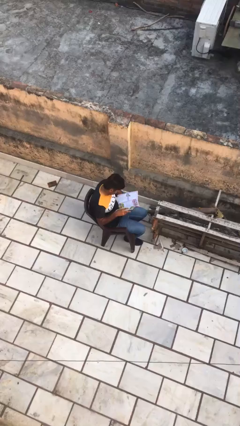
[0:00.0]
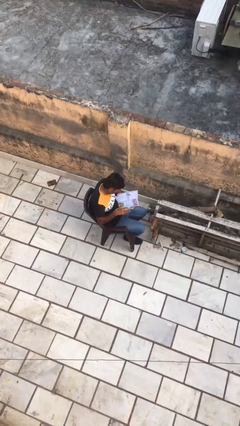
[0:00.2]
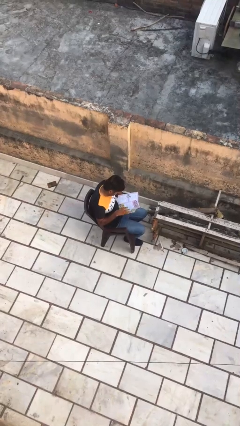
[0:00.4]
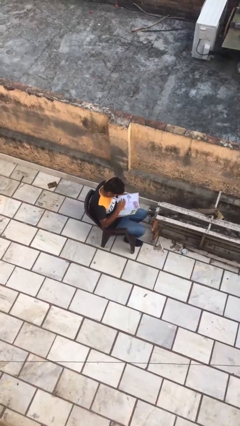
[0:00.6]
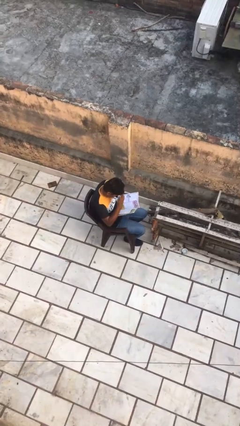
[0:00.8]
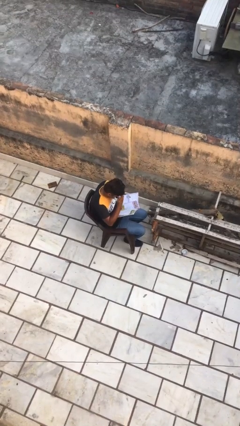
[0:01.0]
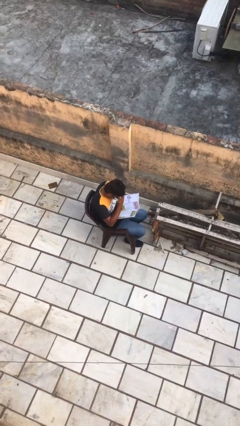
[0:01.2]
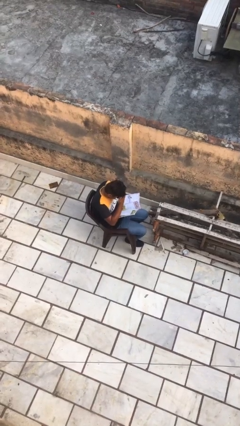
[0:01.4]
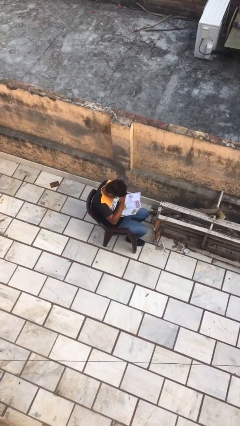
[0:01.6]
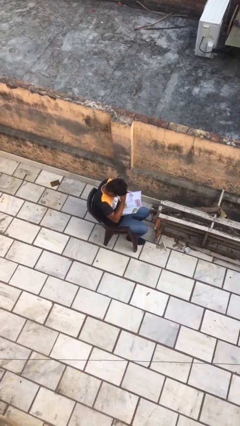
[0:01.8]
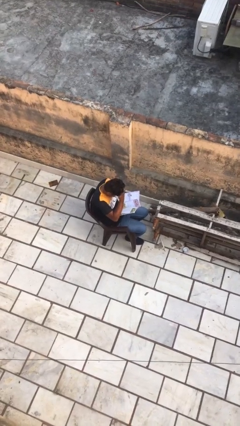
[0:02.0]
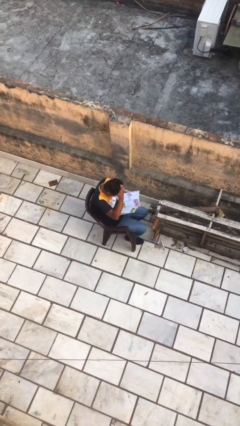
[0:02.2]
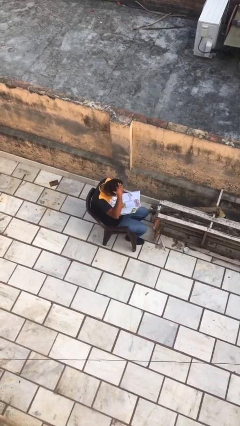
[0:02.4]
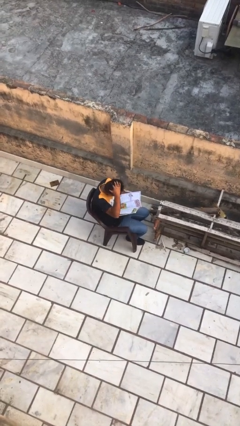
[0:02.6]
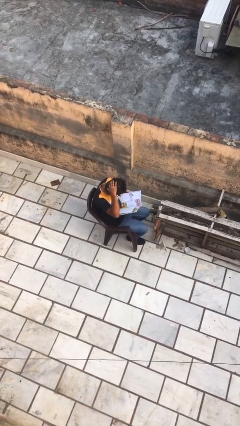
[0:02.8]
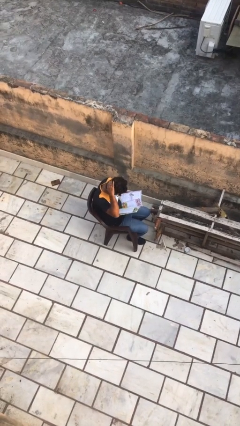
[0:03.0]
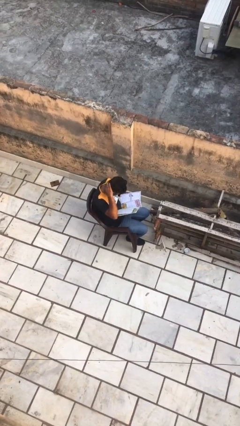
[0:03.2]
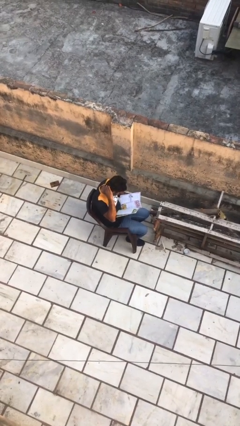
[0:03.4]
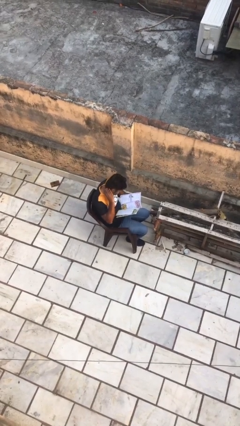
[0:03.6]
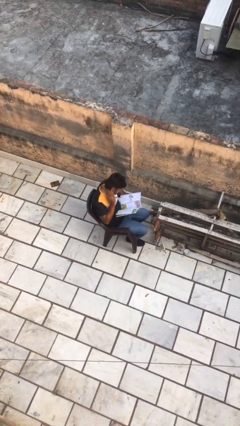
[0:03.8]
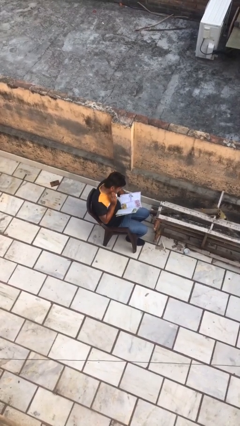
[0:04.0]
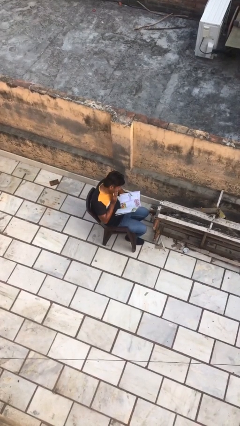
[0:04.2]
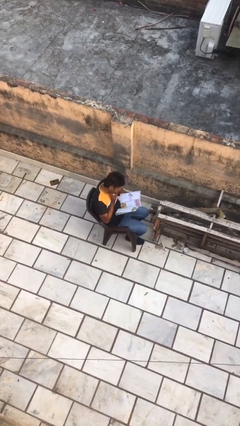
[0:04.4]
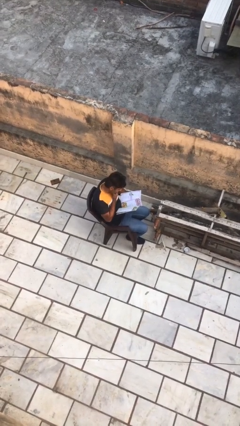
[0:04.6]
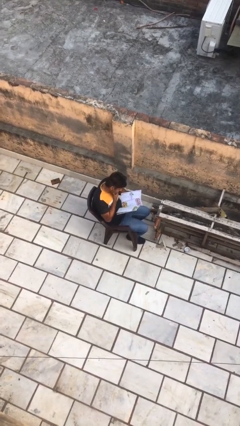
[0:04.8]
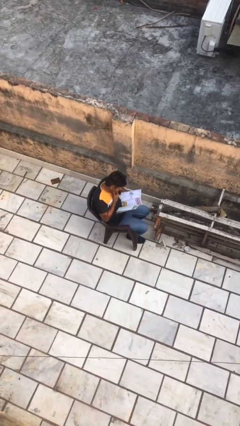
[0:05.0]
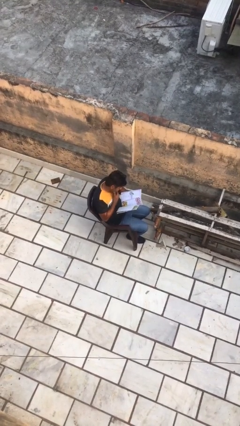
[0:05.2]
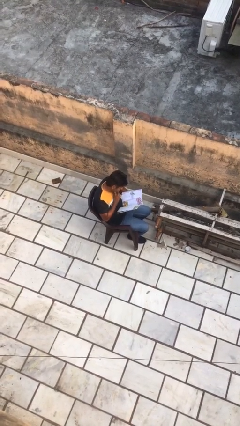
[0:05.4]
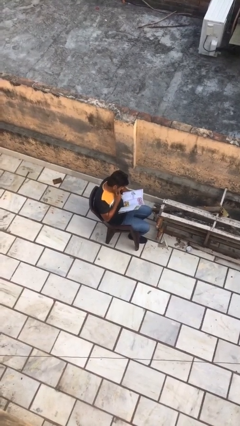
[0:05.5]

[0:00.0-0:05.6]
person reads document

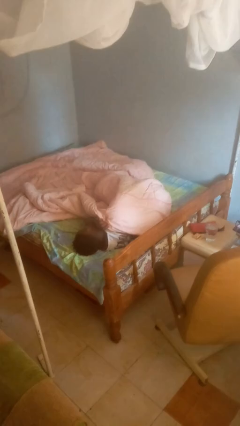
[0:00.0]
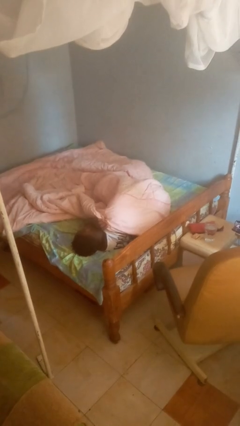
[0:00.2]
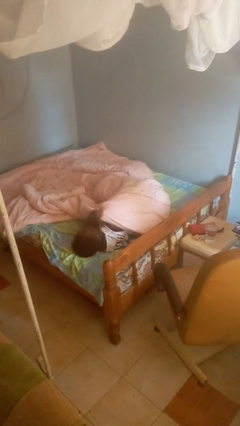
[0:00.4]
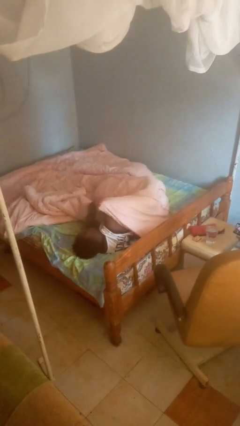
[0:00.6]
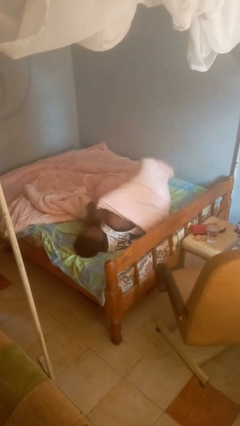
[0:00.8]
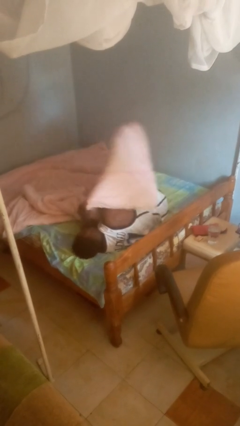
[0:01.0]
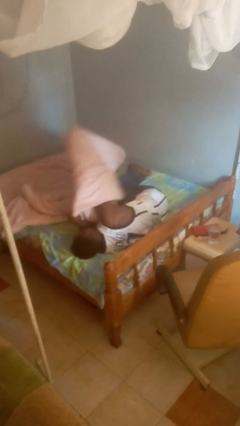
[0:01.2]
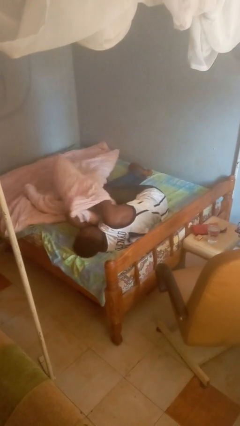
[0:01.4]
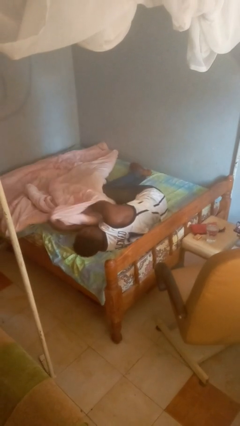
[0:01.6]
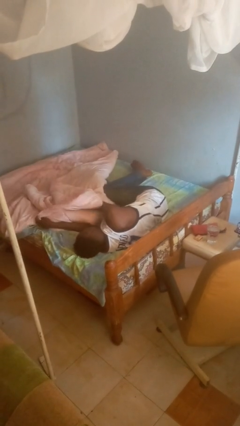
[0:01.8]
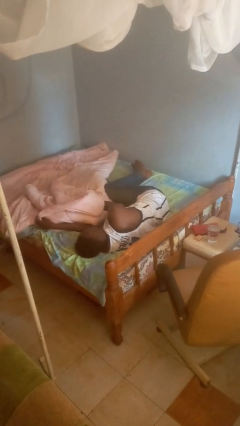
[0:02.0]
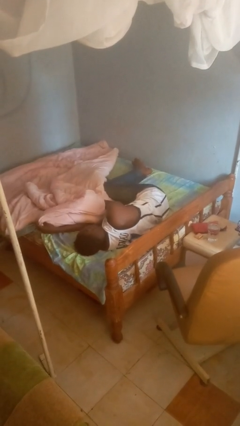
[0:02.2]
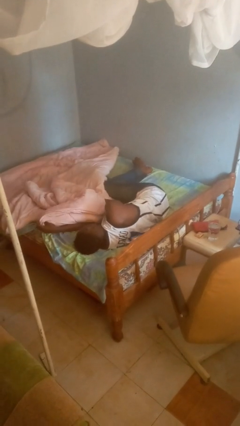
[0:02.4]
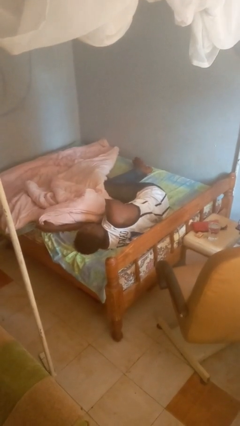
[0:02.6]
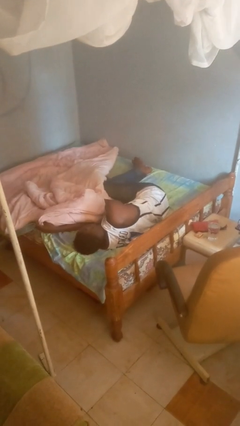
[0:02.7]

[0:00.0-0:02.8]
person uncovers with blanket

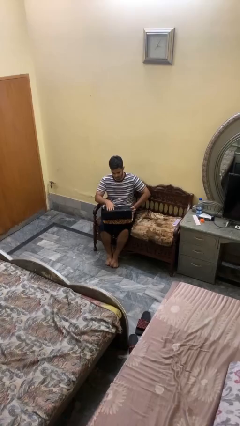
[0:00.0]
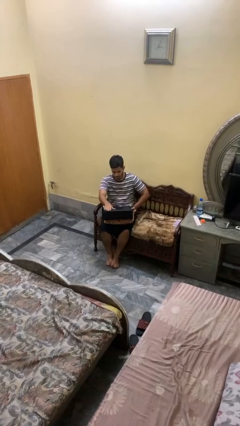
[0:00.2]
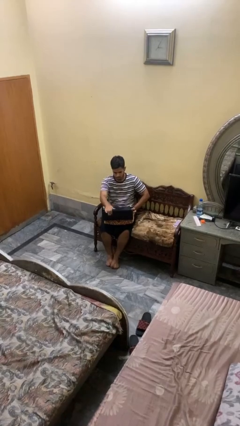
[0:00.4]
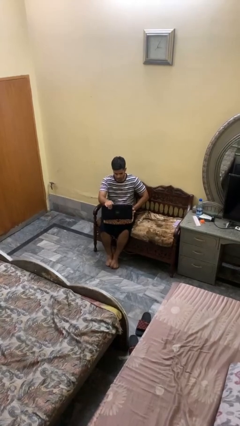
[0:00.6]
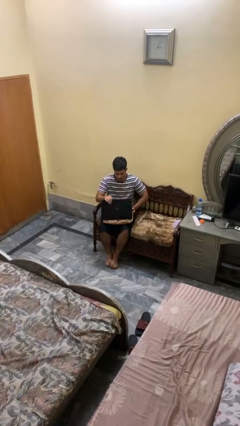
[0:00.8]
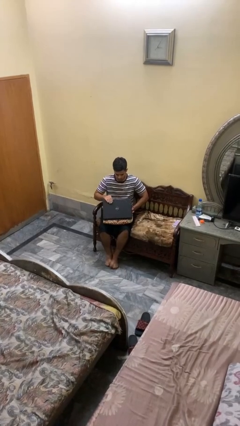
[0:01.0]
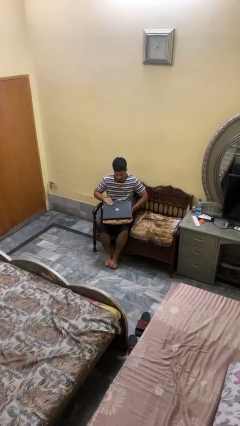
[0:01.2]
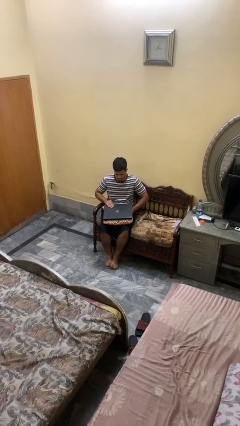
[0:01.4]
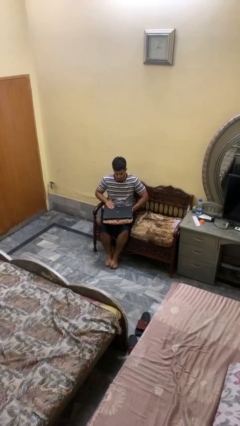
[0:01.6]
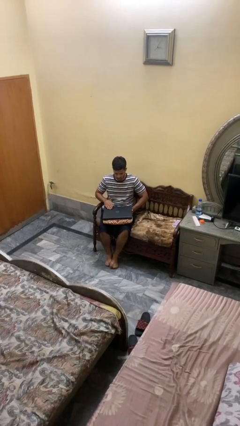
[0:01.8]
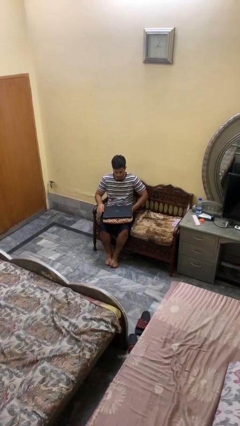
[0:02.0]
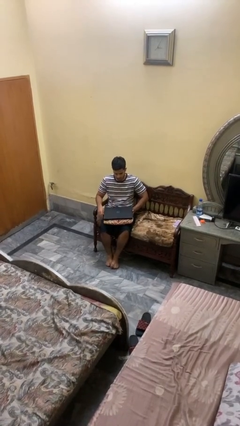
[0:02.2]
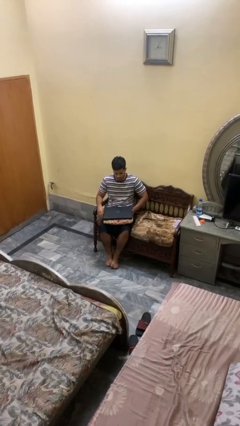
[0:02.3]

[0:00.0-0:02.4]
person closes laptop

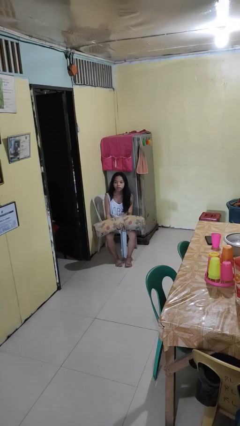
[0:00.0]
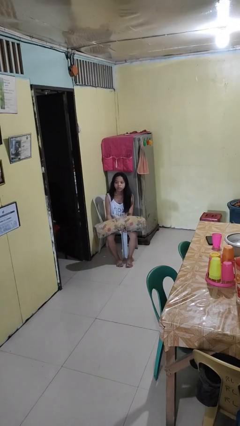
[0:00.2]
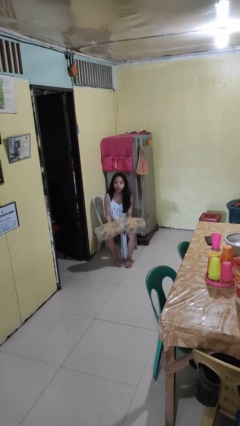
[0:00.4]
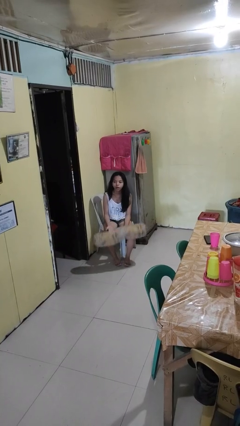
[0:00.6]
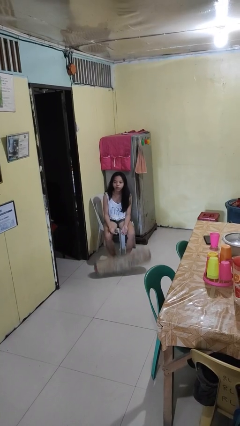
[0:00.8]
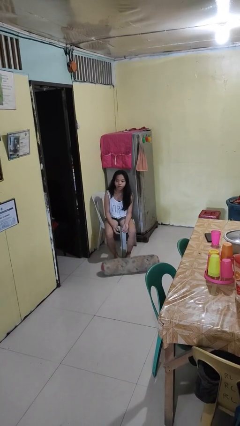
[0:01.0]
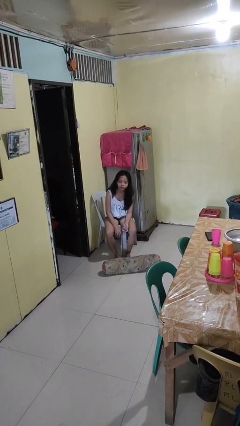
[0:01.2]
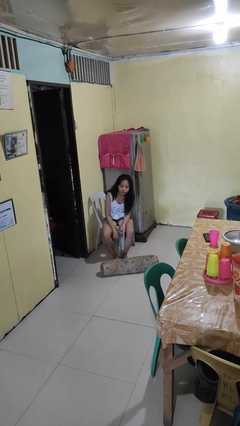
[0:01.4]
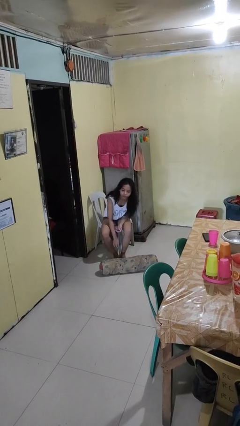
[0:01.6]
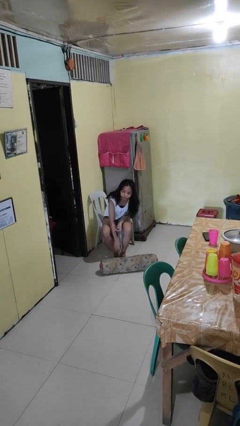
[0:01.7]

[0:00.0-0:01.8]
person drops object

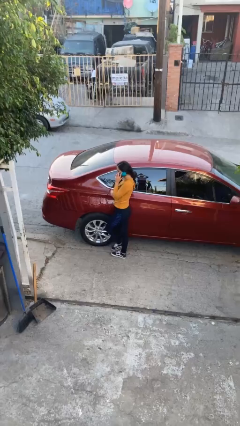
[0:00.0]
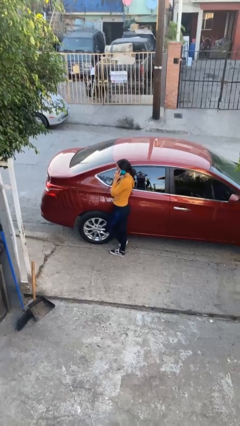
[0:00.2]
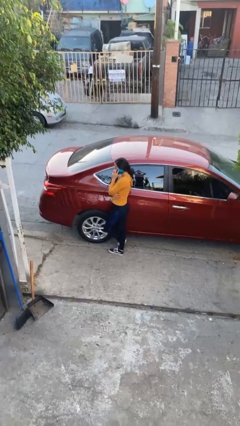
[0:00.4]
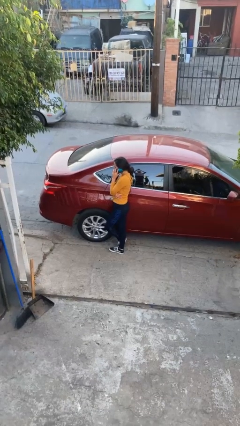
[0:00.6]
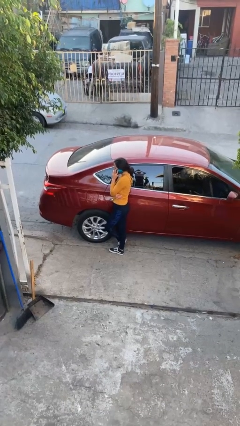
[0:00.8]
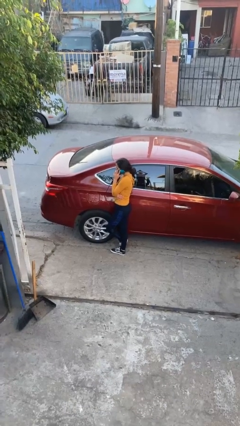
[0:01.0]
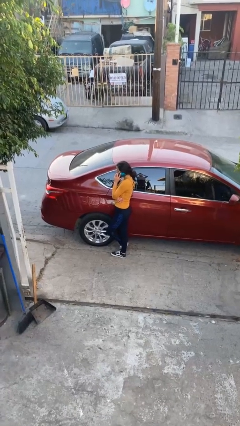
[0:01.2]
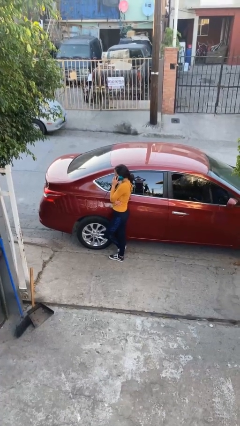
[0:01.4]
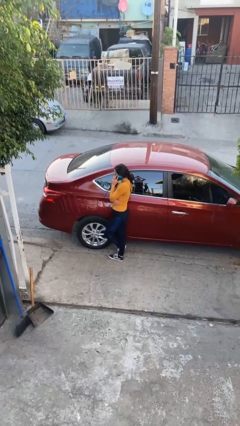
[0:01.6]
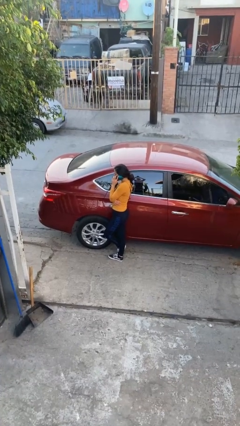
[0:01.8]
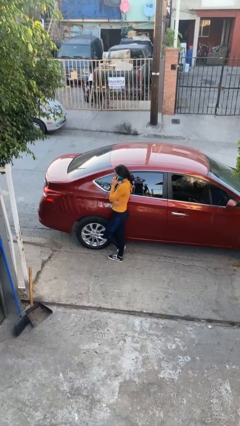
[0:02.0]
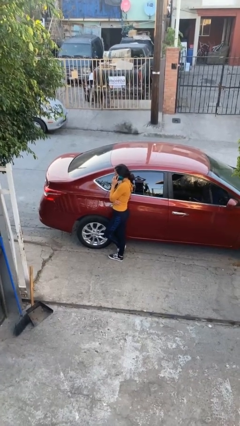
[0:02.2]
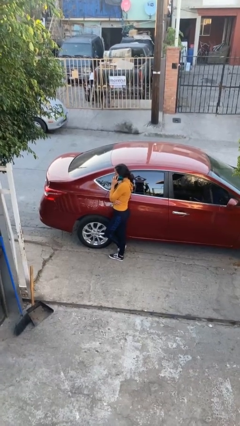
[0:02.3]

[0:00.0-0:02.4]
person leans against car

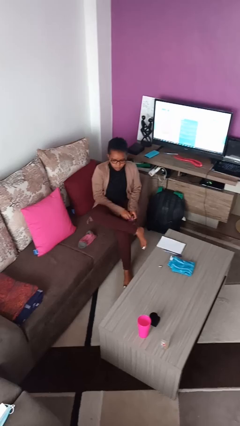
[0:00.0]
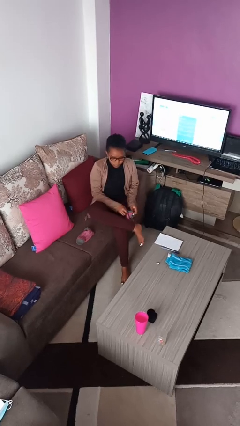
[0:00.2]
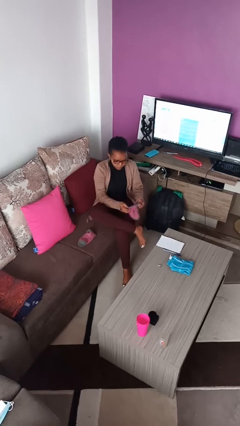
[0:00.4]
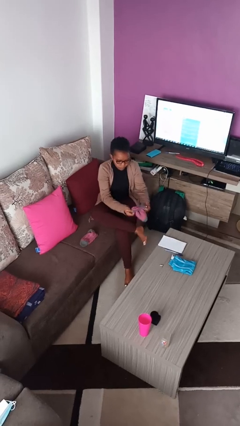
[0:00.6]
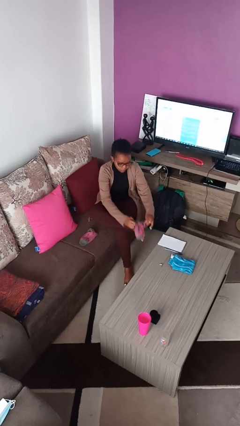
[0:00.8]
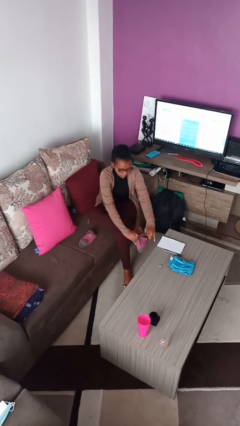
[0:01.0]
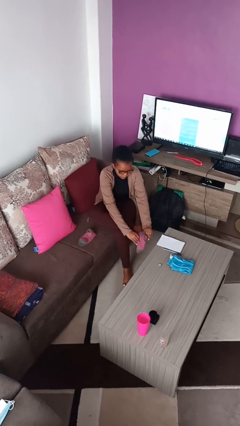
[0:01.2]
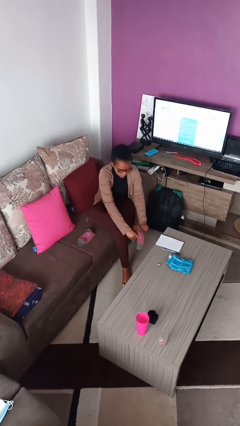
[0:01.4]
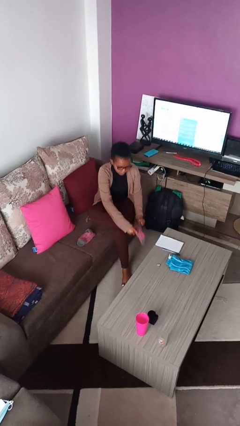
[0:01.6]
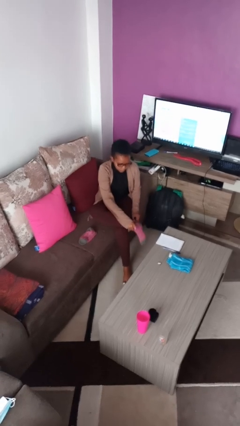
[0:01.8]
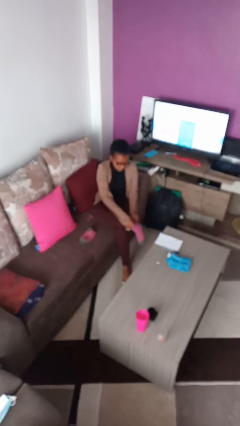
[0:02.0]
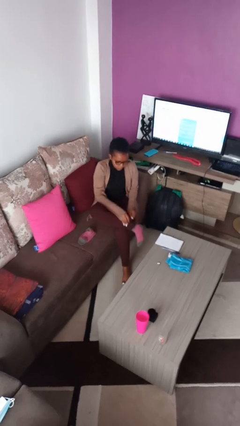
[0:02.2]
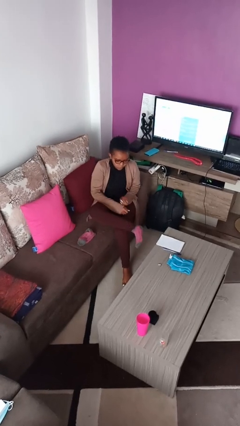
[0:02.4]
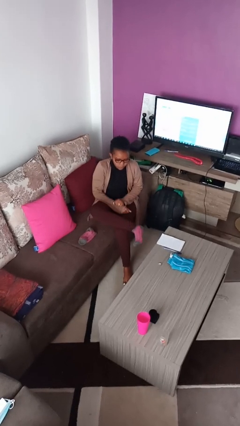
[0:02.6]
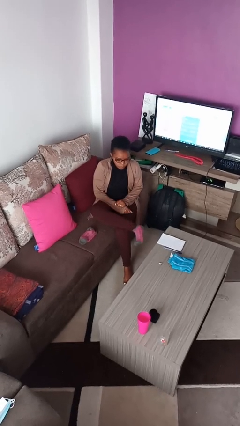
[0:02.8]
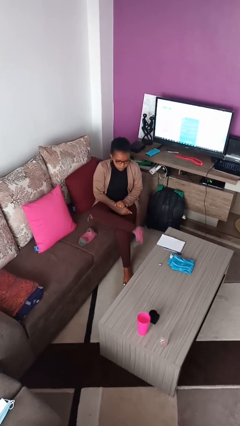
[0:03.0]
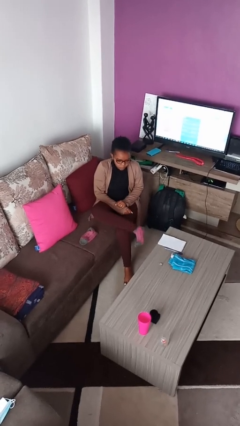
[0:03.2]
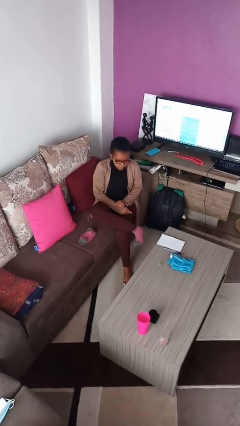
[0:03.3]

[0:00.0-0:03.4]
person puts on socks
